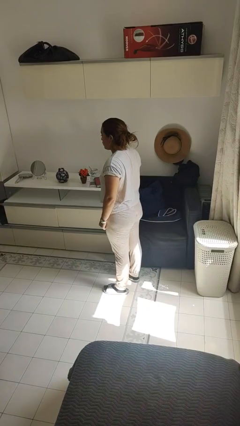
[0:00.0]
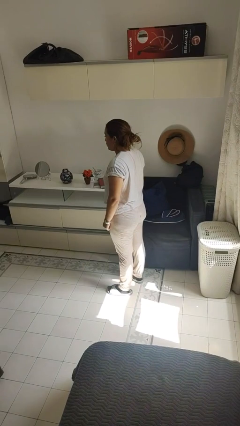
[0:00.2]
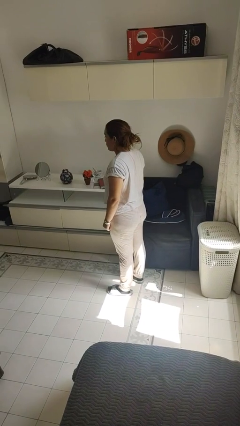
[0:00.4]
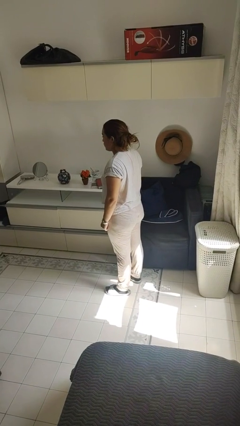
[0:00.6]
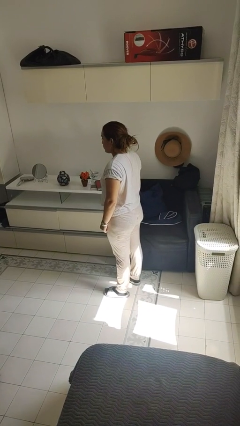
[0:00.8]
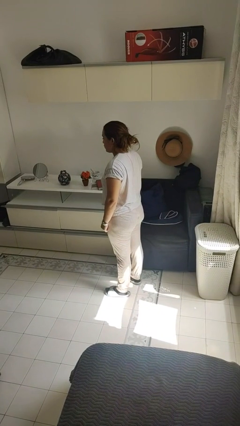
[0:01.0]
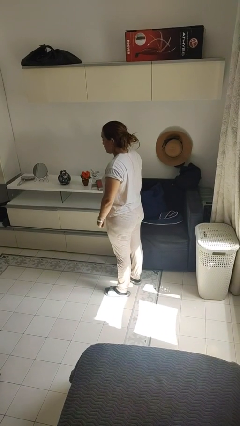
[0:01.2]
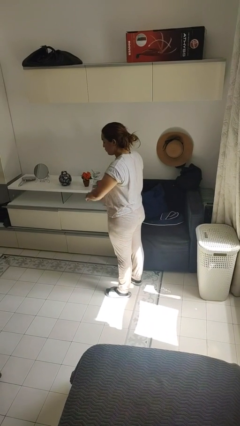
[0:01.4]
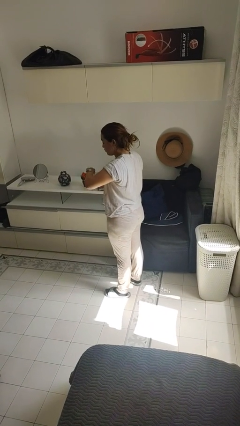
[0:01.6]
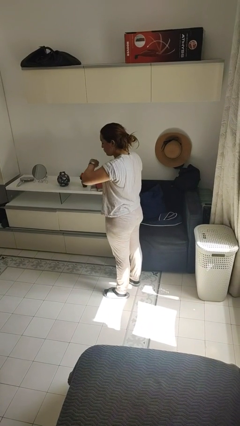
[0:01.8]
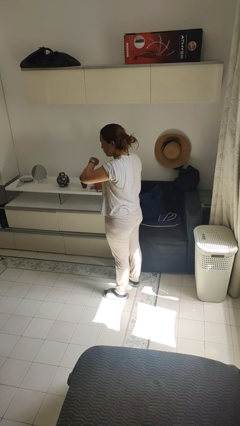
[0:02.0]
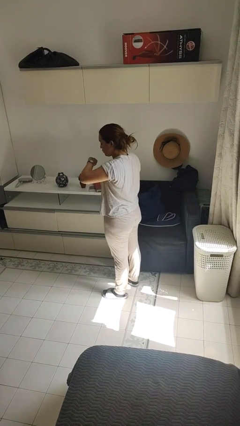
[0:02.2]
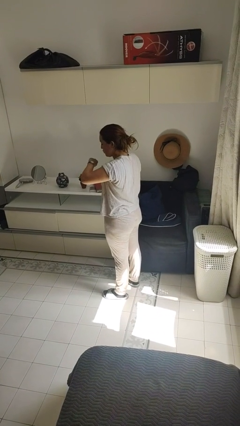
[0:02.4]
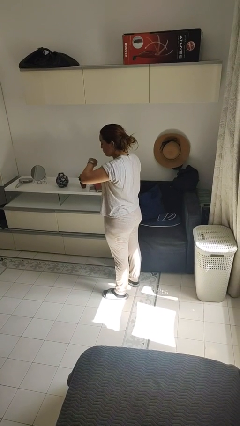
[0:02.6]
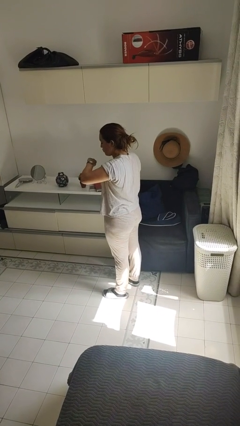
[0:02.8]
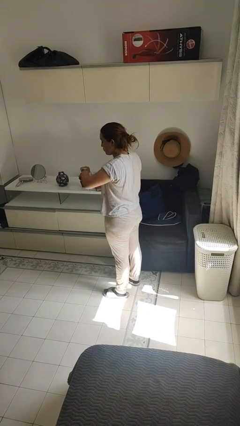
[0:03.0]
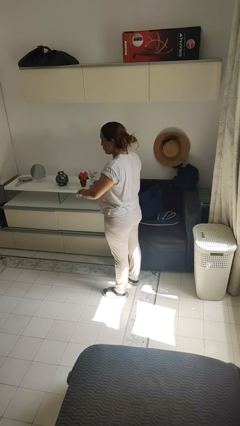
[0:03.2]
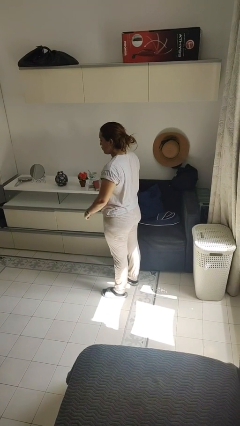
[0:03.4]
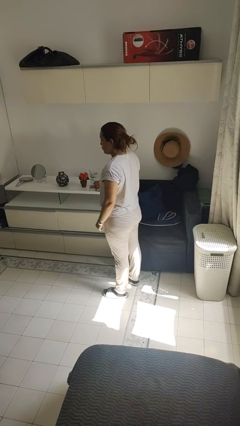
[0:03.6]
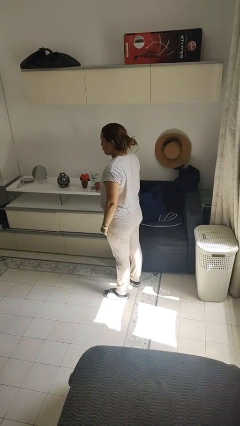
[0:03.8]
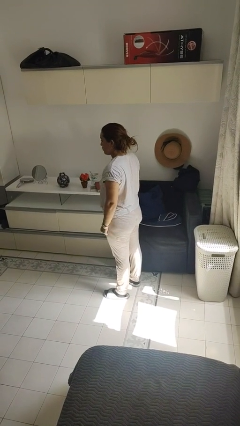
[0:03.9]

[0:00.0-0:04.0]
person looks at wristwatch

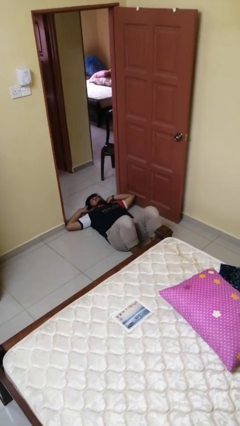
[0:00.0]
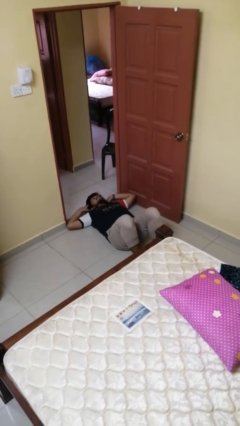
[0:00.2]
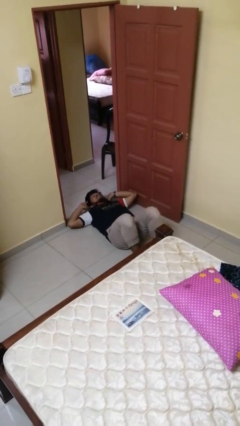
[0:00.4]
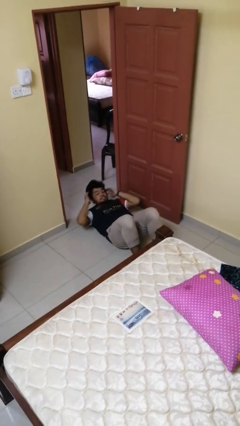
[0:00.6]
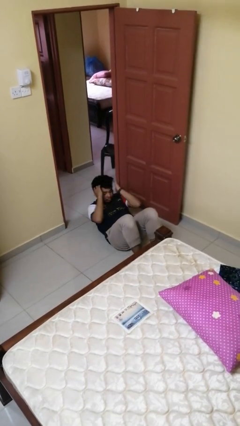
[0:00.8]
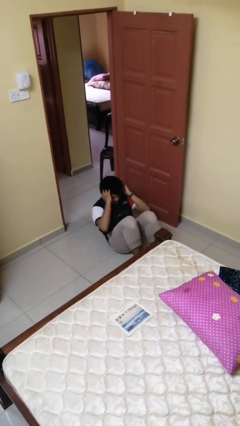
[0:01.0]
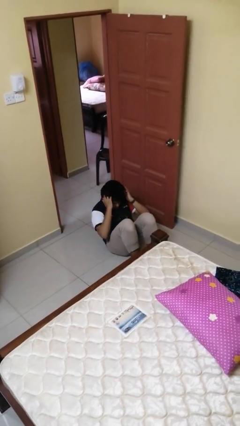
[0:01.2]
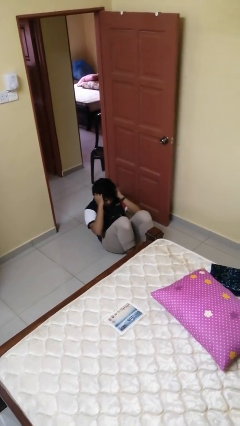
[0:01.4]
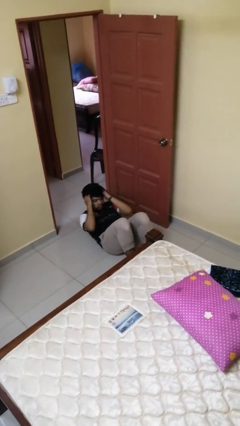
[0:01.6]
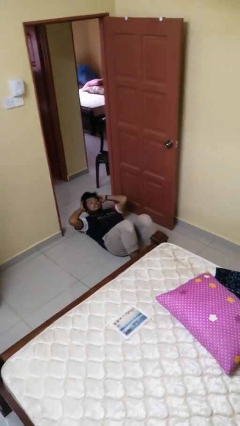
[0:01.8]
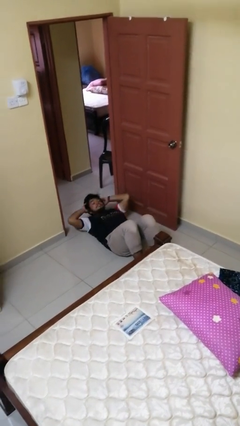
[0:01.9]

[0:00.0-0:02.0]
person exercises with situp

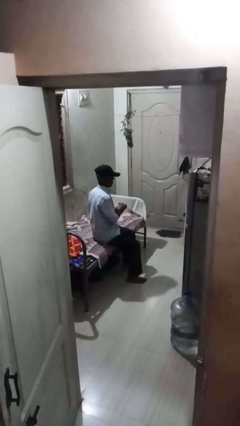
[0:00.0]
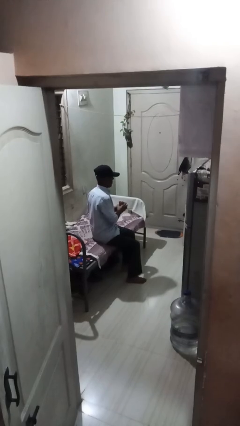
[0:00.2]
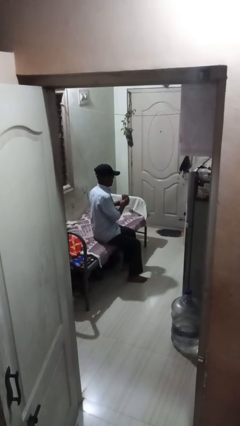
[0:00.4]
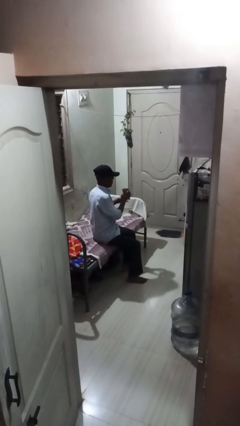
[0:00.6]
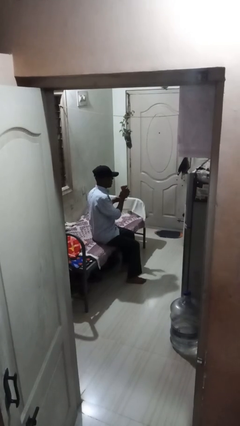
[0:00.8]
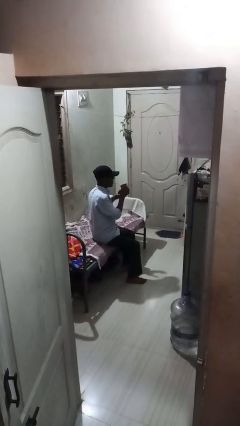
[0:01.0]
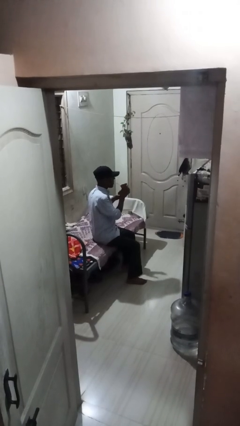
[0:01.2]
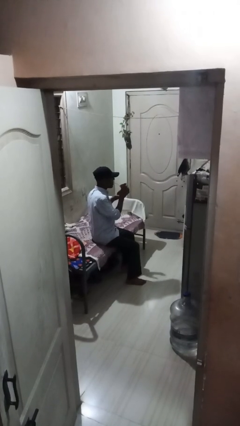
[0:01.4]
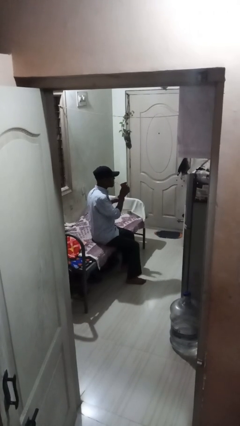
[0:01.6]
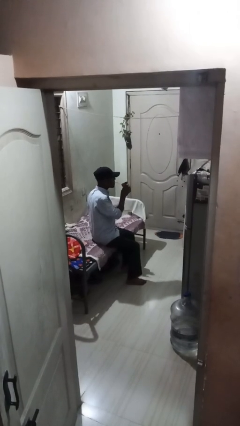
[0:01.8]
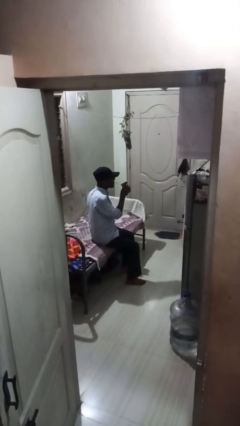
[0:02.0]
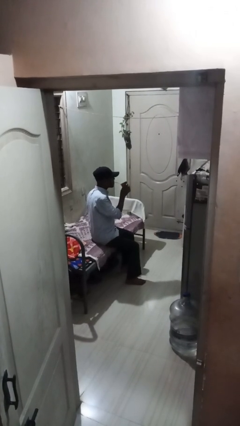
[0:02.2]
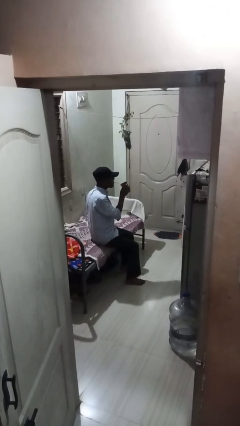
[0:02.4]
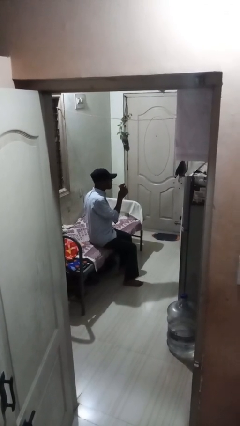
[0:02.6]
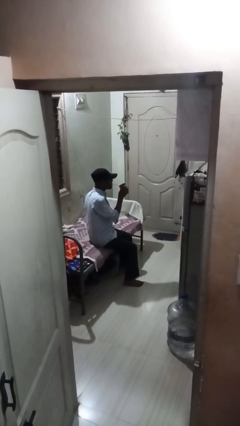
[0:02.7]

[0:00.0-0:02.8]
person drinks from straw

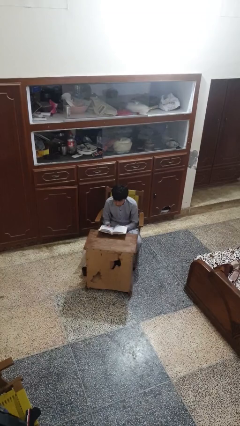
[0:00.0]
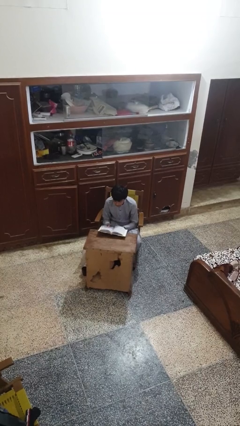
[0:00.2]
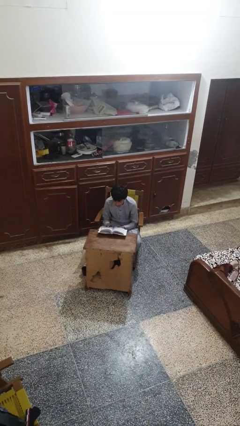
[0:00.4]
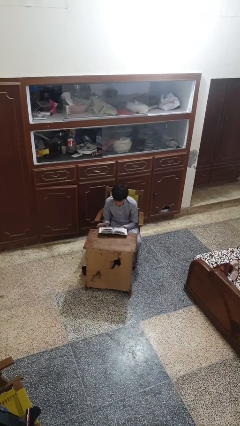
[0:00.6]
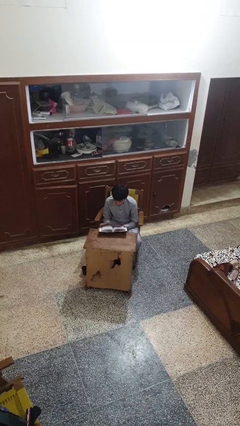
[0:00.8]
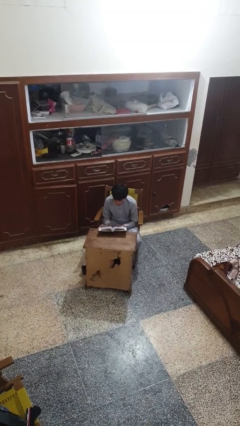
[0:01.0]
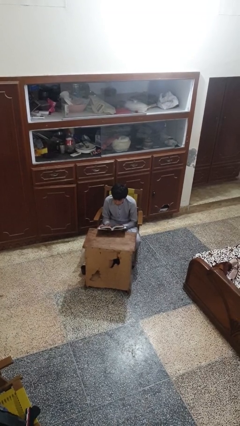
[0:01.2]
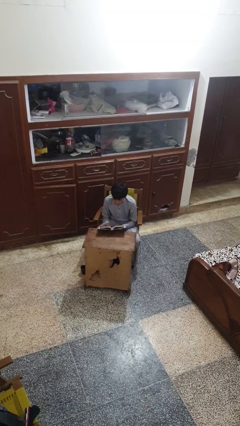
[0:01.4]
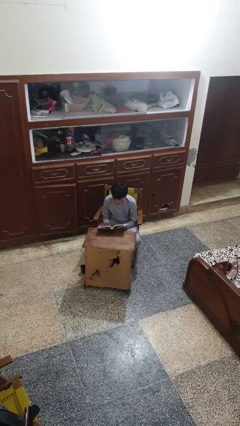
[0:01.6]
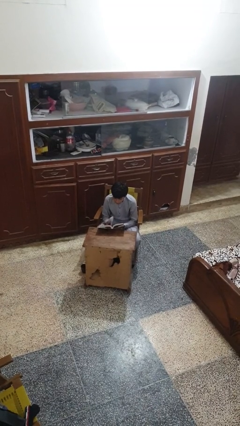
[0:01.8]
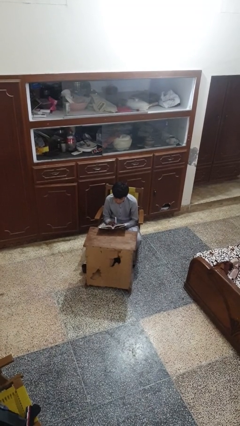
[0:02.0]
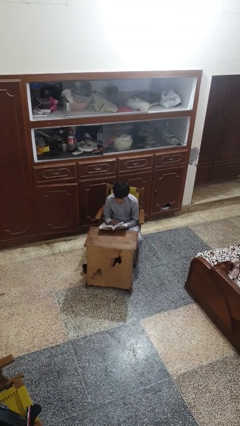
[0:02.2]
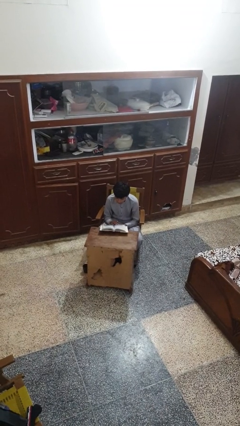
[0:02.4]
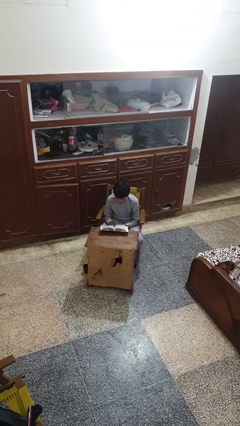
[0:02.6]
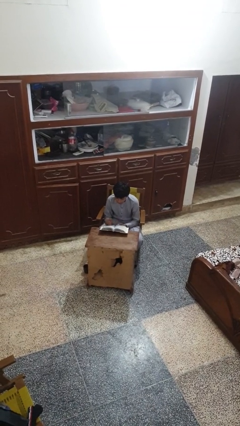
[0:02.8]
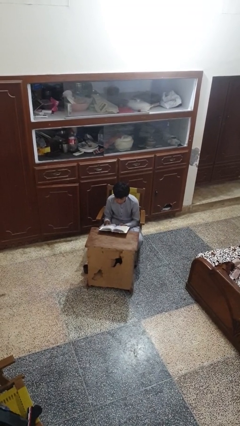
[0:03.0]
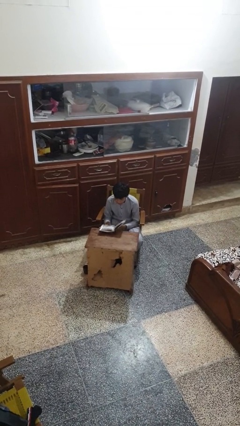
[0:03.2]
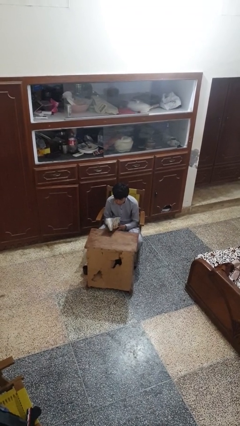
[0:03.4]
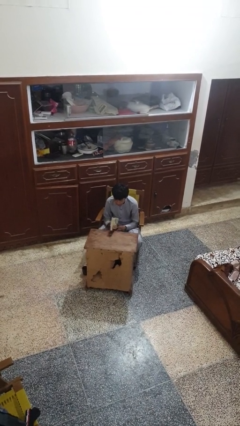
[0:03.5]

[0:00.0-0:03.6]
person reads book

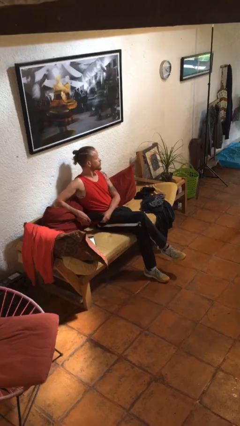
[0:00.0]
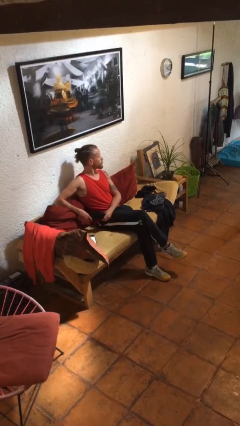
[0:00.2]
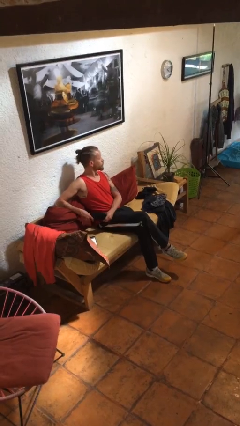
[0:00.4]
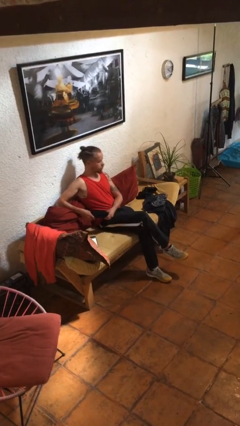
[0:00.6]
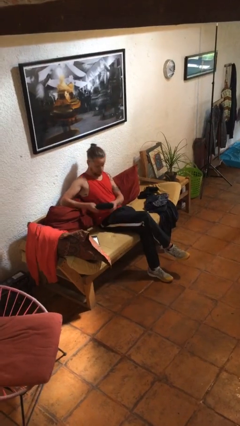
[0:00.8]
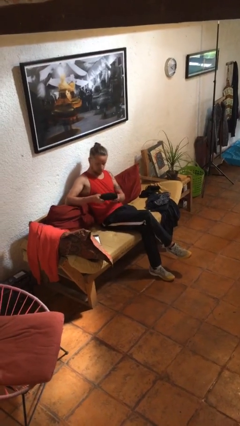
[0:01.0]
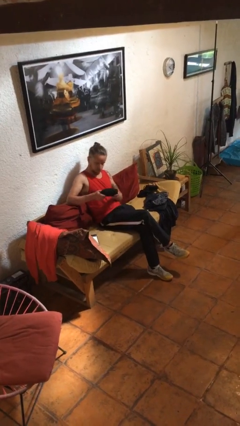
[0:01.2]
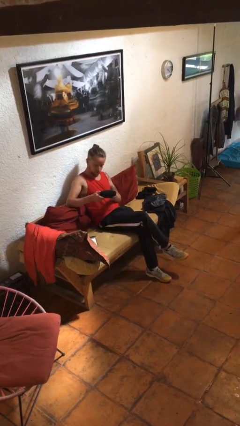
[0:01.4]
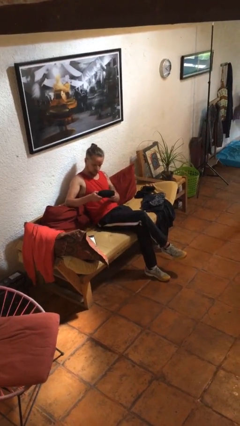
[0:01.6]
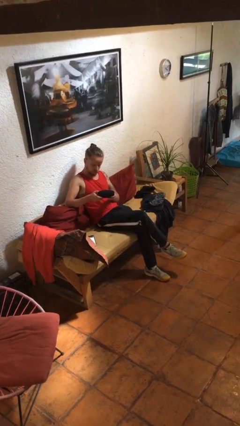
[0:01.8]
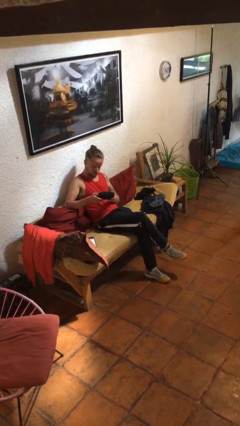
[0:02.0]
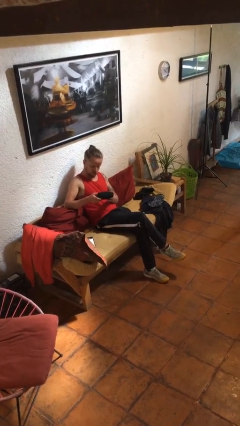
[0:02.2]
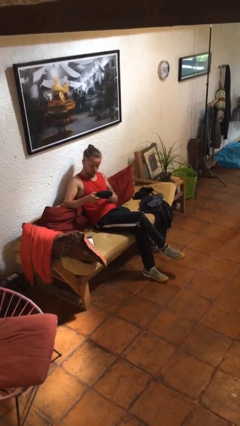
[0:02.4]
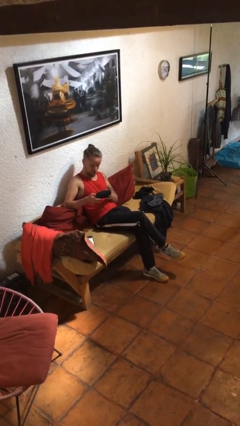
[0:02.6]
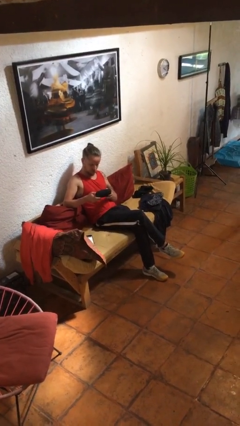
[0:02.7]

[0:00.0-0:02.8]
person interacts with handheld game

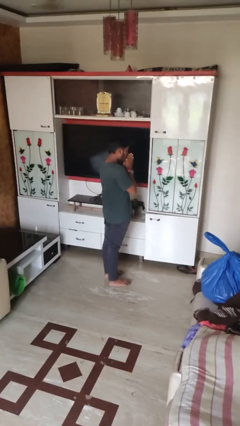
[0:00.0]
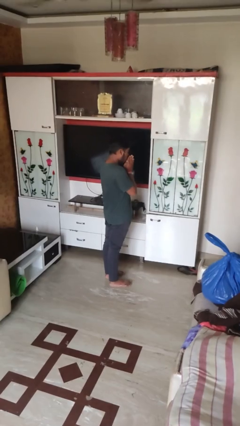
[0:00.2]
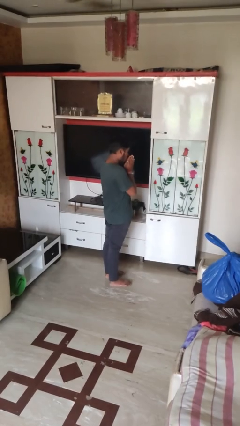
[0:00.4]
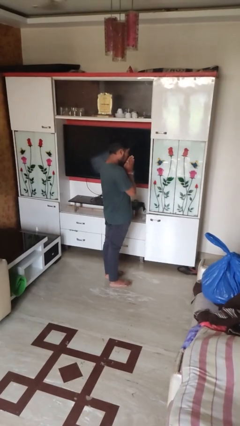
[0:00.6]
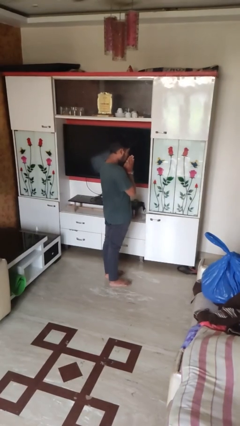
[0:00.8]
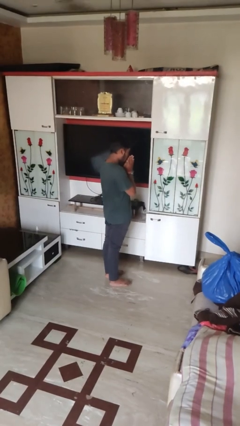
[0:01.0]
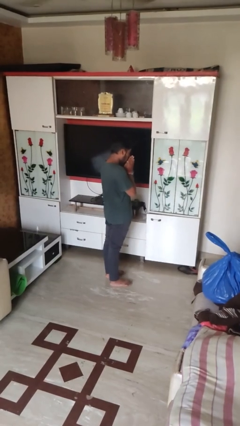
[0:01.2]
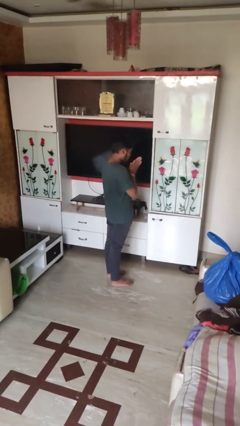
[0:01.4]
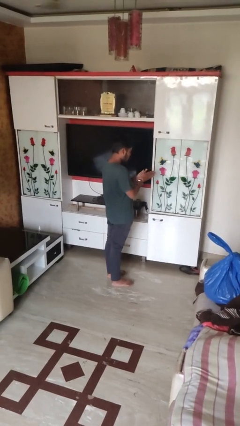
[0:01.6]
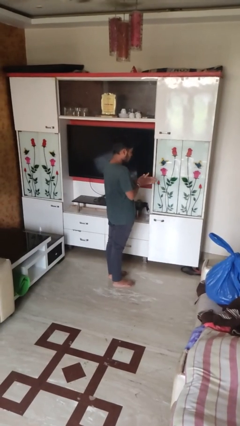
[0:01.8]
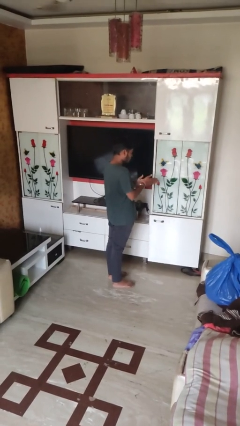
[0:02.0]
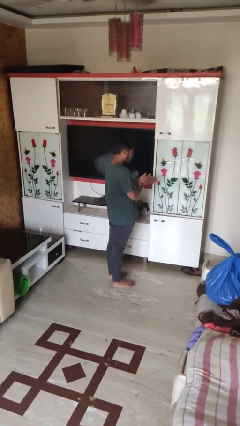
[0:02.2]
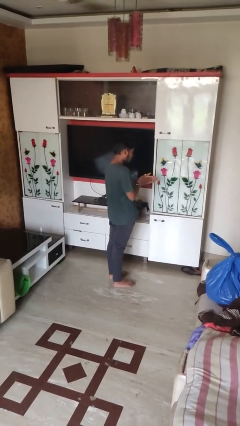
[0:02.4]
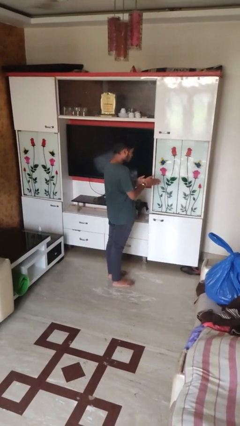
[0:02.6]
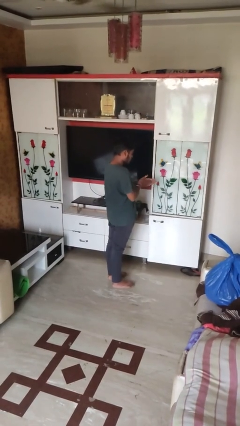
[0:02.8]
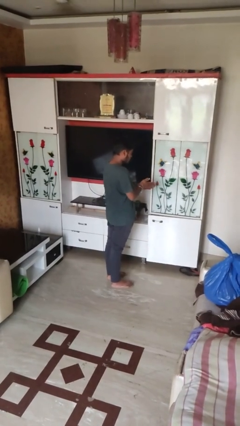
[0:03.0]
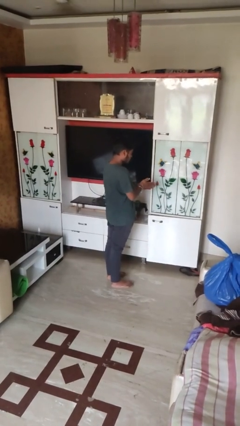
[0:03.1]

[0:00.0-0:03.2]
person blows into hands
